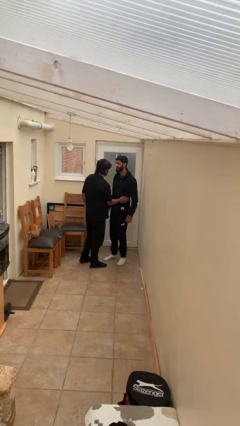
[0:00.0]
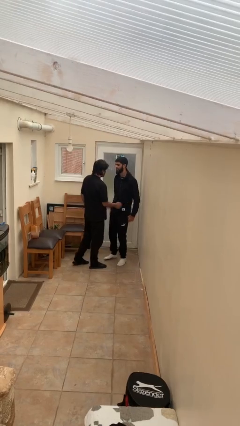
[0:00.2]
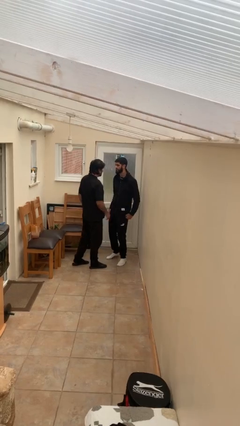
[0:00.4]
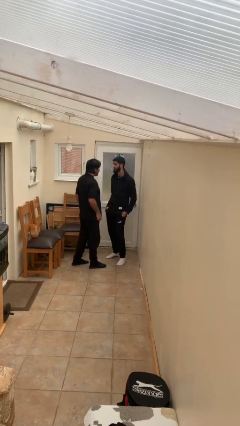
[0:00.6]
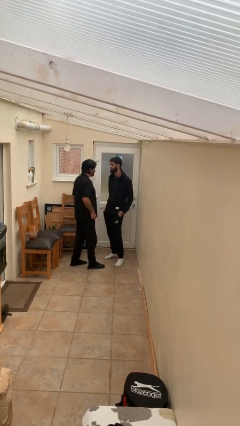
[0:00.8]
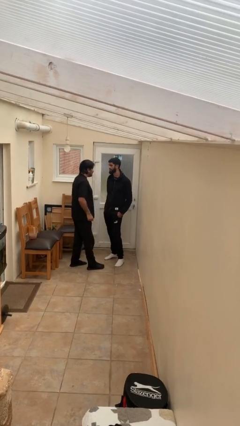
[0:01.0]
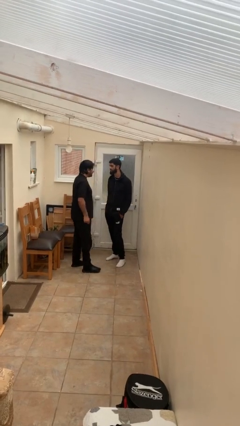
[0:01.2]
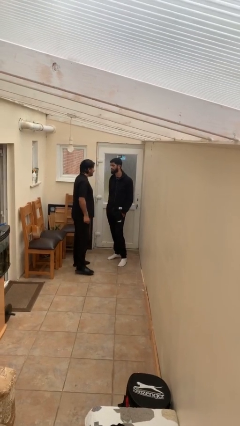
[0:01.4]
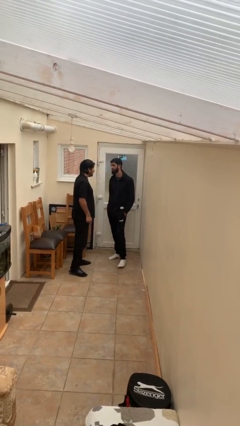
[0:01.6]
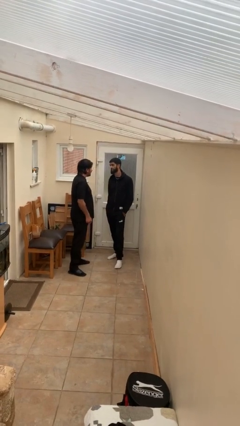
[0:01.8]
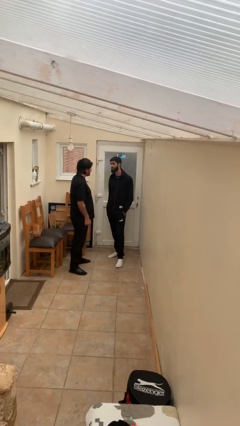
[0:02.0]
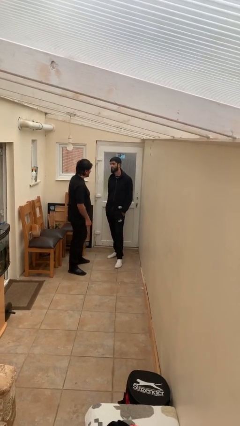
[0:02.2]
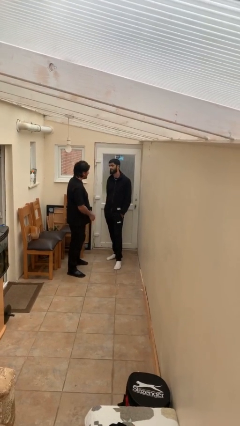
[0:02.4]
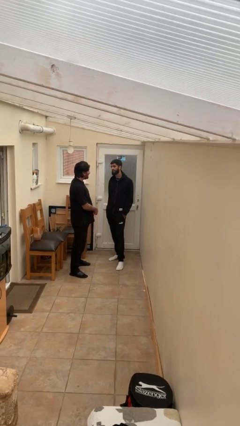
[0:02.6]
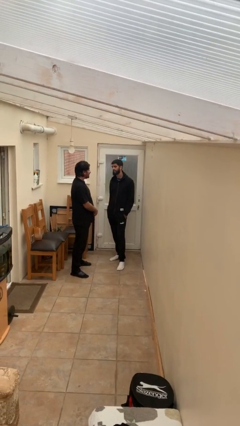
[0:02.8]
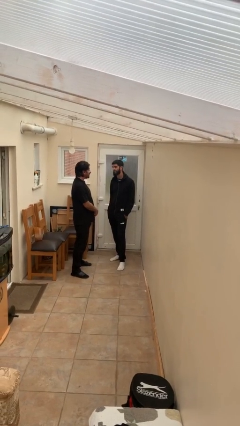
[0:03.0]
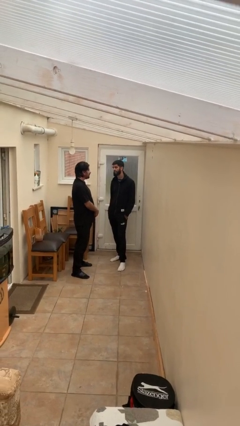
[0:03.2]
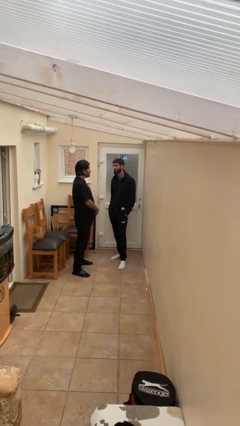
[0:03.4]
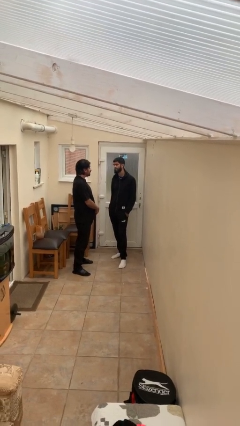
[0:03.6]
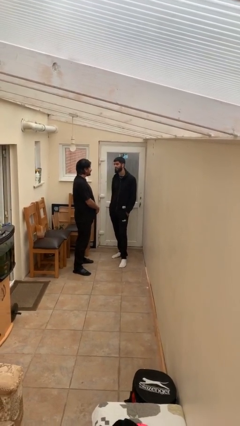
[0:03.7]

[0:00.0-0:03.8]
person talks to person

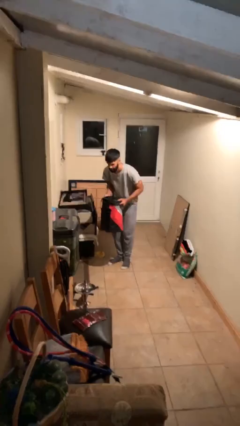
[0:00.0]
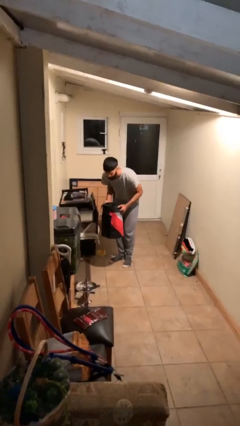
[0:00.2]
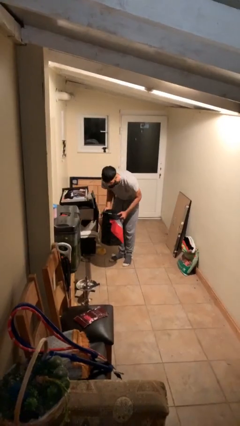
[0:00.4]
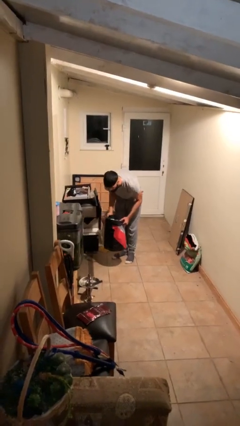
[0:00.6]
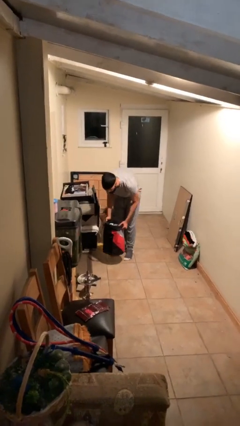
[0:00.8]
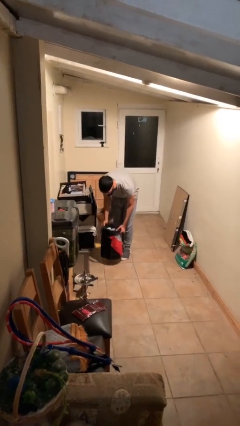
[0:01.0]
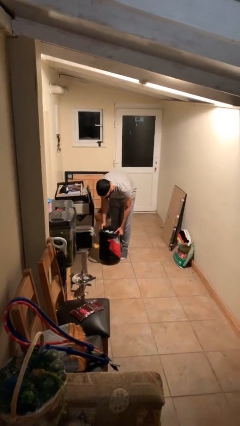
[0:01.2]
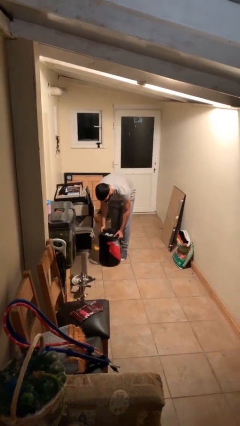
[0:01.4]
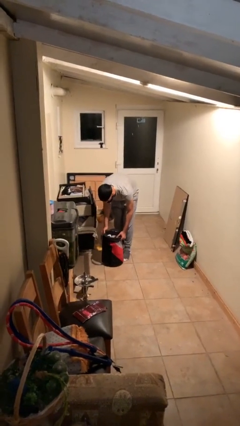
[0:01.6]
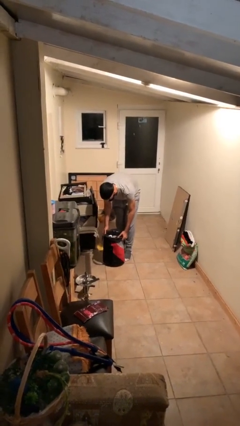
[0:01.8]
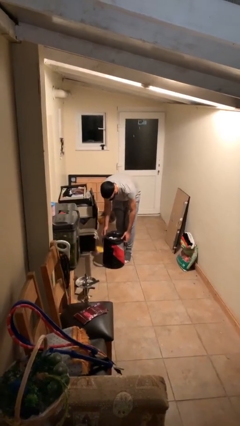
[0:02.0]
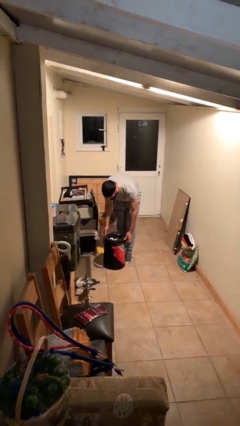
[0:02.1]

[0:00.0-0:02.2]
person puts down object on floor

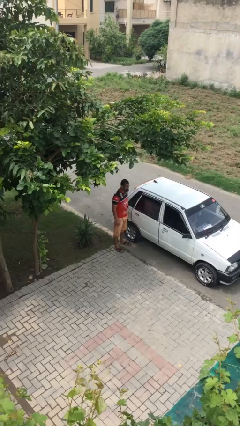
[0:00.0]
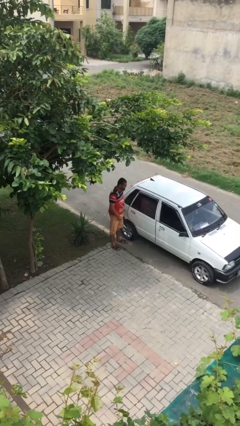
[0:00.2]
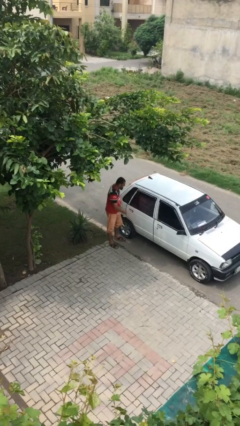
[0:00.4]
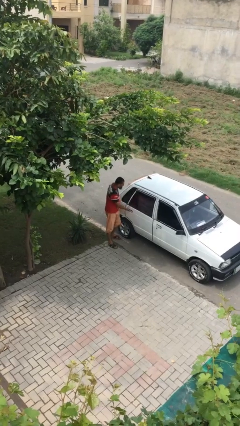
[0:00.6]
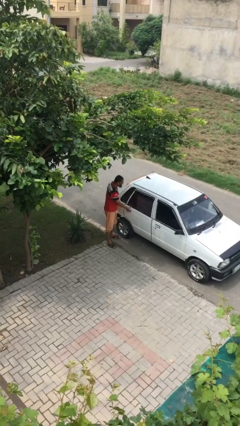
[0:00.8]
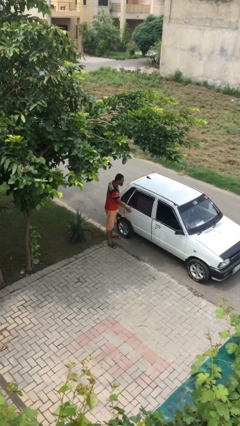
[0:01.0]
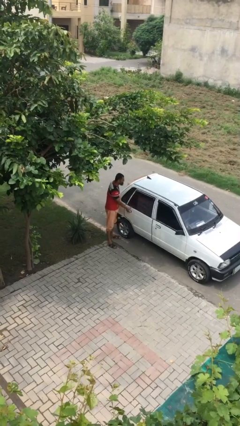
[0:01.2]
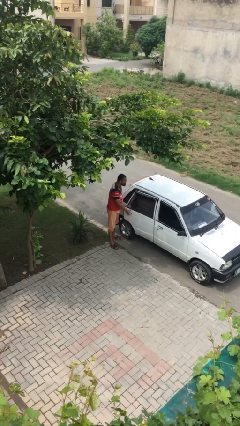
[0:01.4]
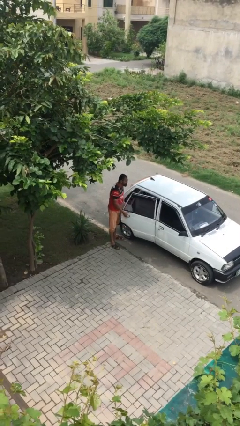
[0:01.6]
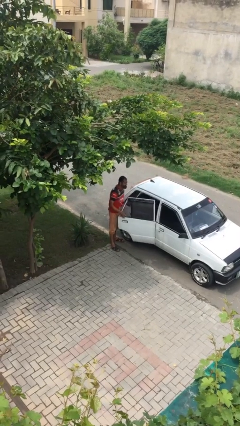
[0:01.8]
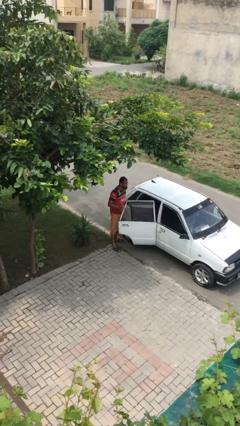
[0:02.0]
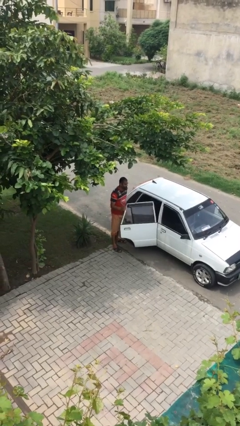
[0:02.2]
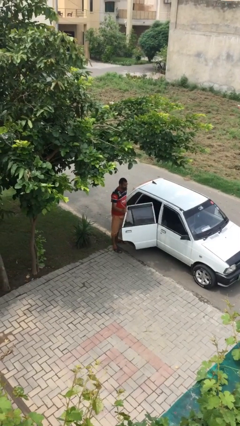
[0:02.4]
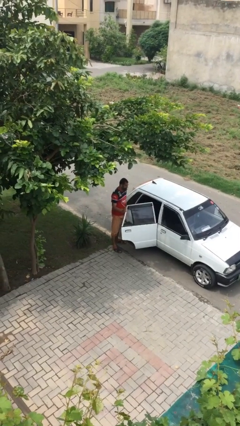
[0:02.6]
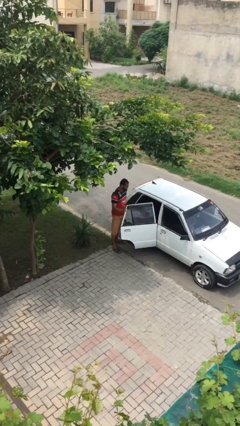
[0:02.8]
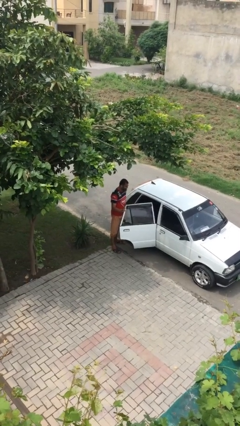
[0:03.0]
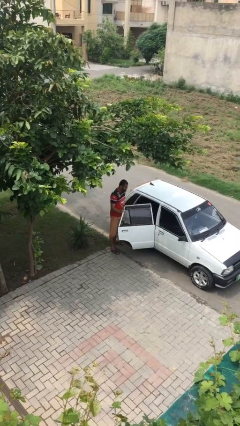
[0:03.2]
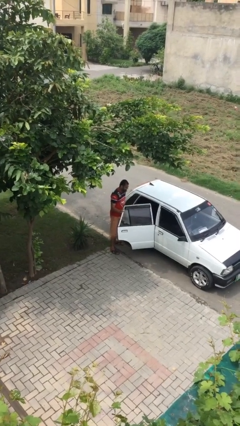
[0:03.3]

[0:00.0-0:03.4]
person opens car door

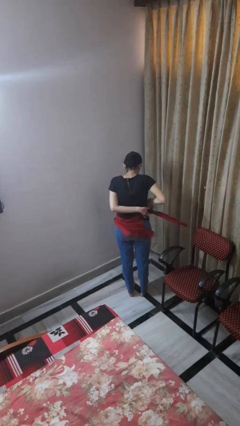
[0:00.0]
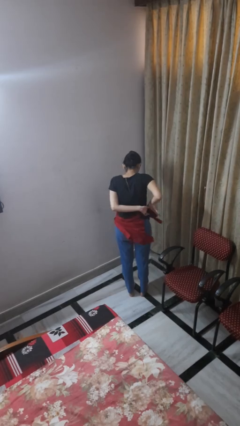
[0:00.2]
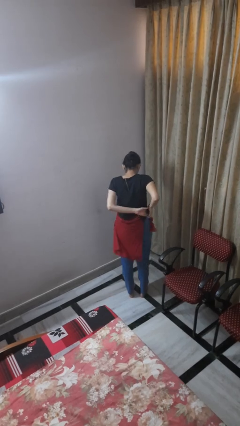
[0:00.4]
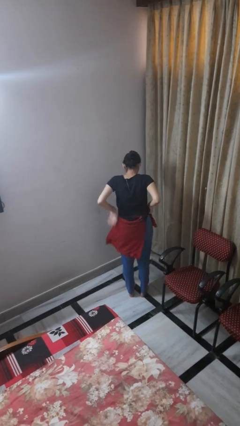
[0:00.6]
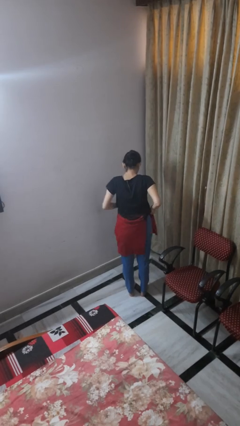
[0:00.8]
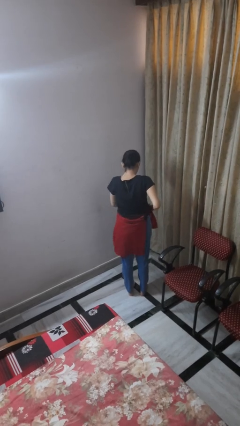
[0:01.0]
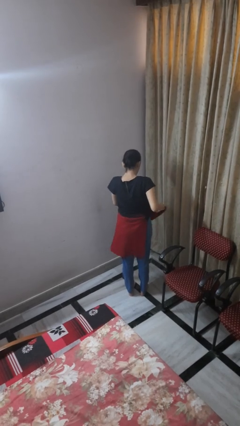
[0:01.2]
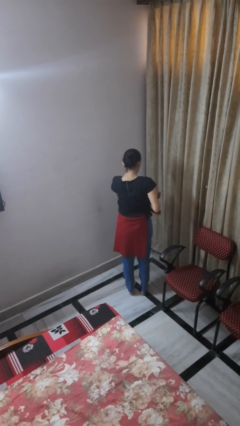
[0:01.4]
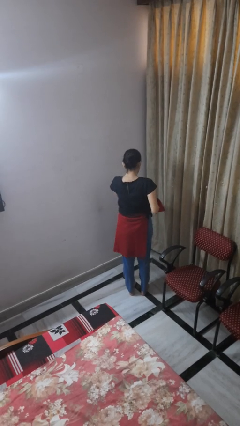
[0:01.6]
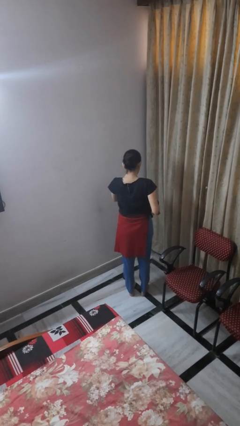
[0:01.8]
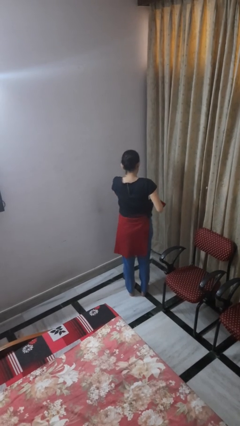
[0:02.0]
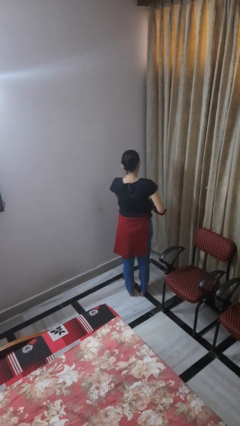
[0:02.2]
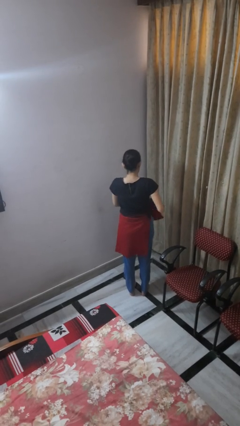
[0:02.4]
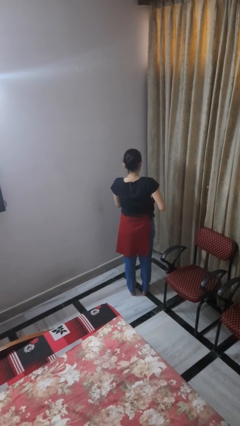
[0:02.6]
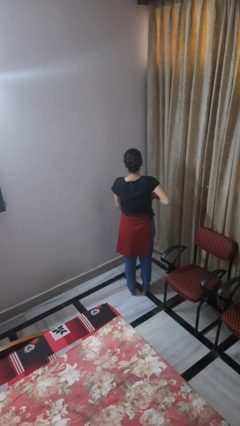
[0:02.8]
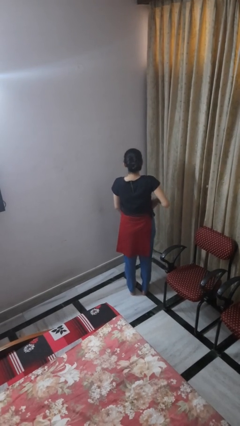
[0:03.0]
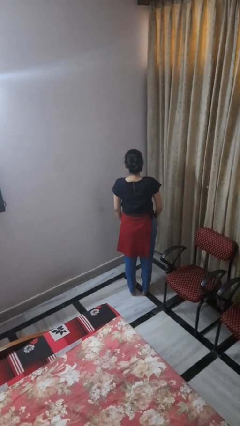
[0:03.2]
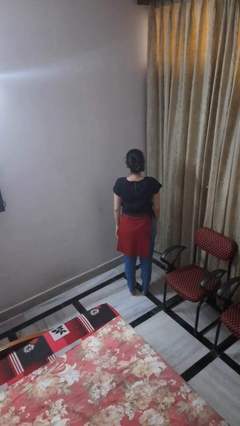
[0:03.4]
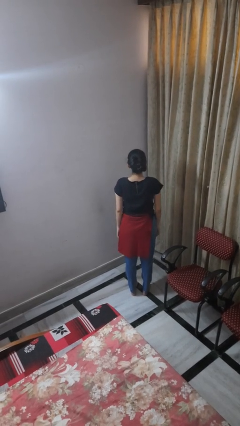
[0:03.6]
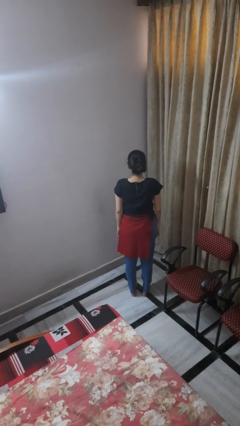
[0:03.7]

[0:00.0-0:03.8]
person ties jacket around waist

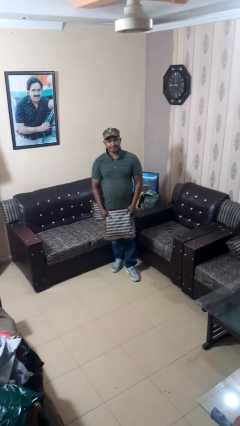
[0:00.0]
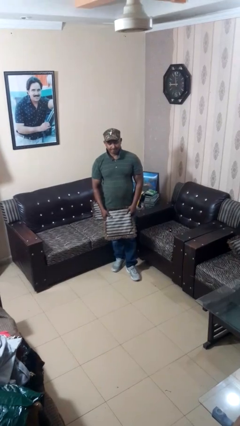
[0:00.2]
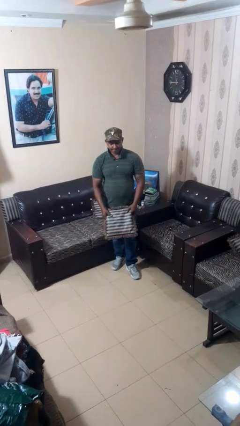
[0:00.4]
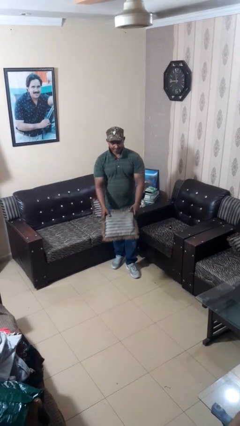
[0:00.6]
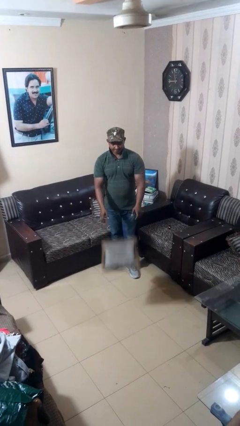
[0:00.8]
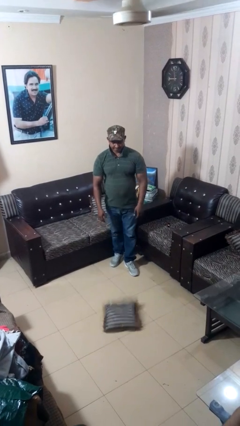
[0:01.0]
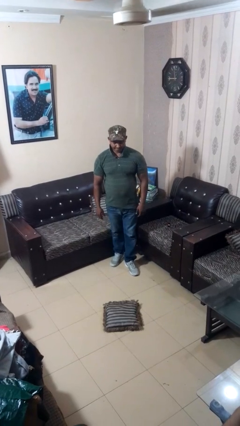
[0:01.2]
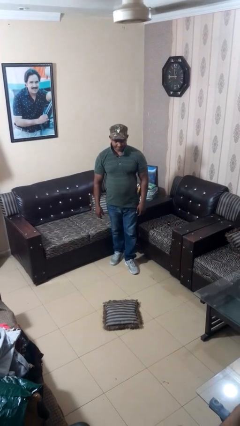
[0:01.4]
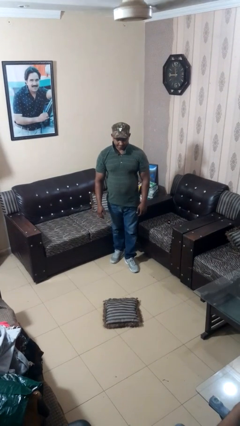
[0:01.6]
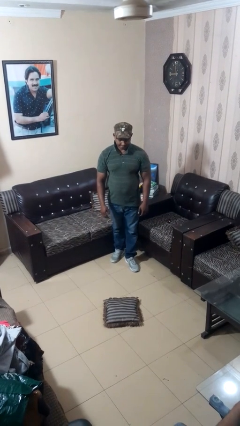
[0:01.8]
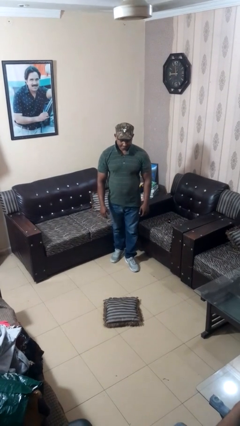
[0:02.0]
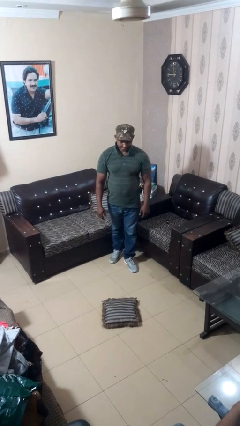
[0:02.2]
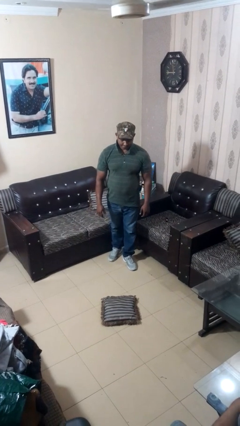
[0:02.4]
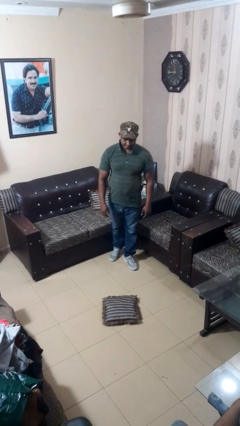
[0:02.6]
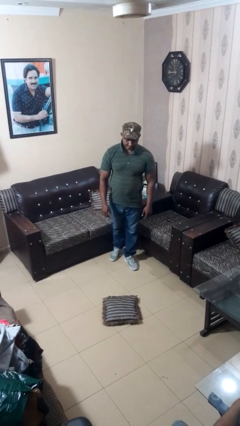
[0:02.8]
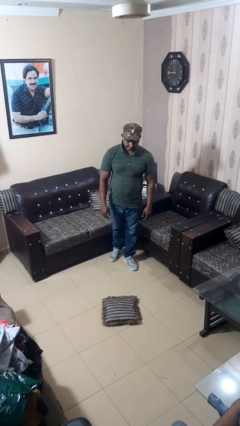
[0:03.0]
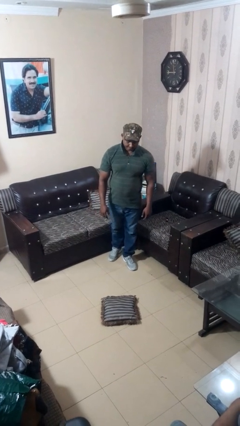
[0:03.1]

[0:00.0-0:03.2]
person throws object to ground

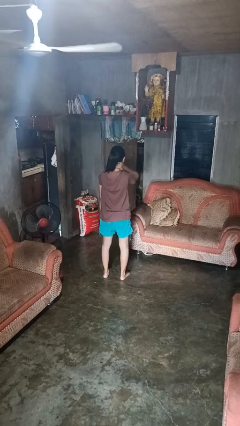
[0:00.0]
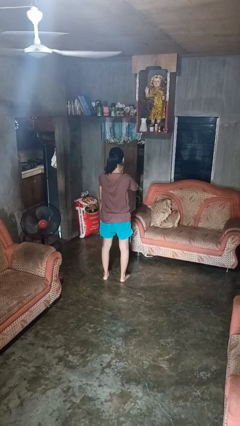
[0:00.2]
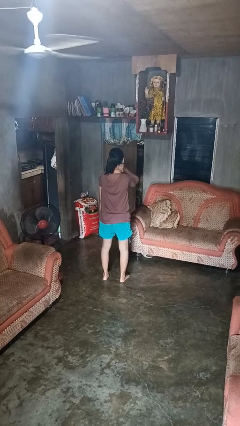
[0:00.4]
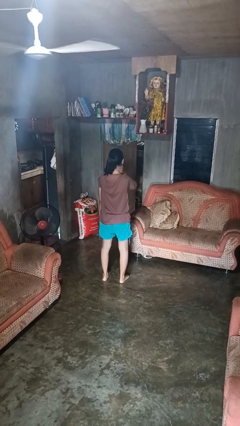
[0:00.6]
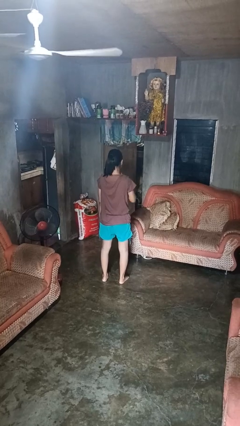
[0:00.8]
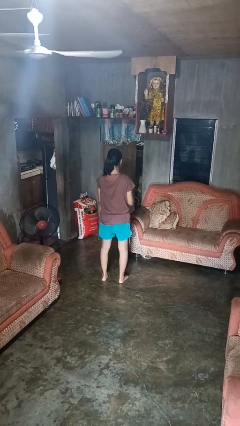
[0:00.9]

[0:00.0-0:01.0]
person rubs neck

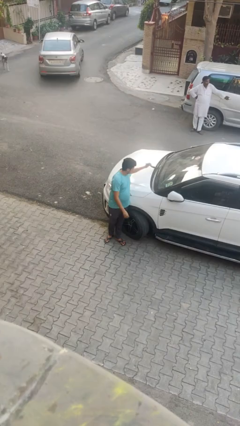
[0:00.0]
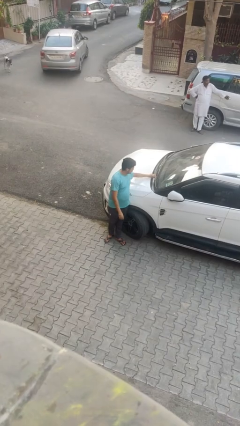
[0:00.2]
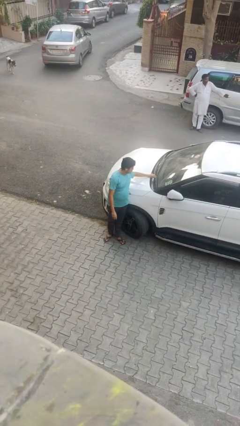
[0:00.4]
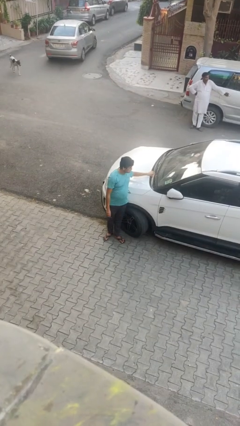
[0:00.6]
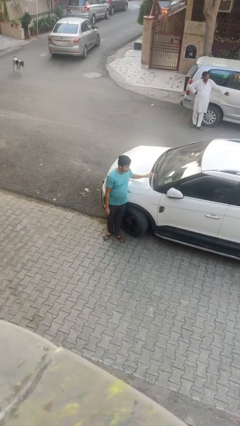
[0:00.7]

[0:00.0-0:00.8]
person flips down car wipers
